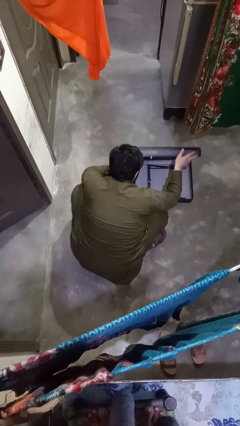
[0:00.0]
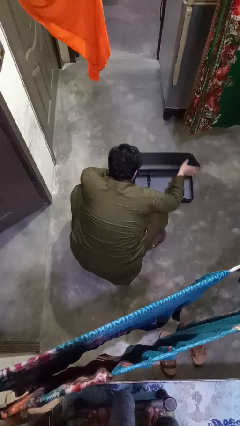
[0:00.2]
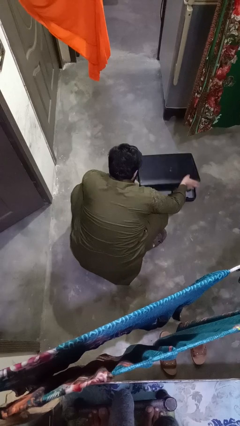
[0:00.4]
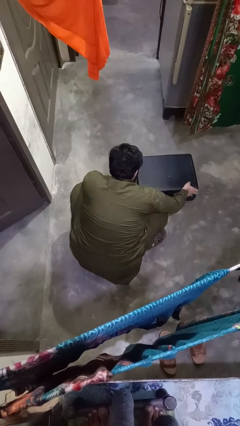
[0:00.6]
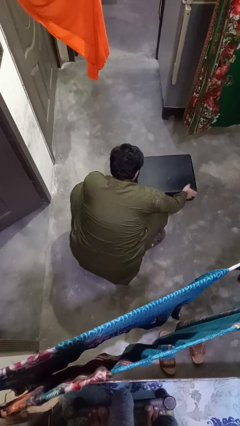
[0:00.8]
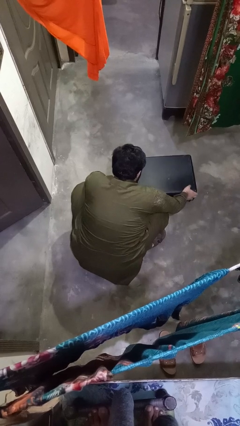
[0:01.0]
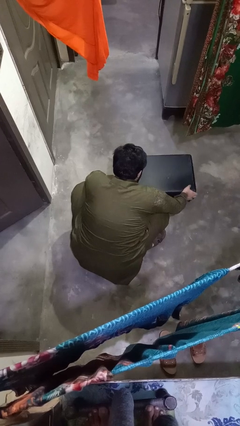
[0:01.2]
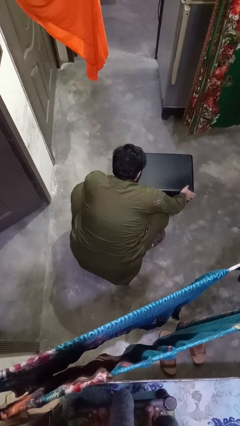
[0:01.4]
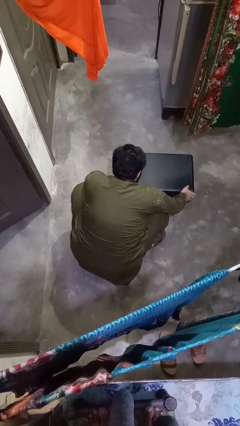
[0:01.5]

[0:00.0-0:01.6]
person closes suitcase

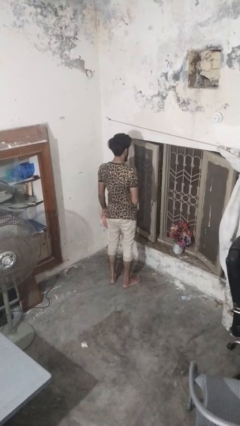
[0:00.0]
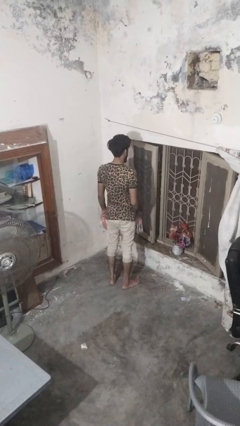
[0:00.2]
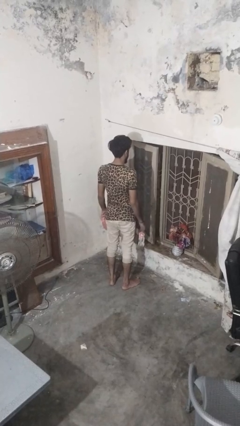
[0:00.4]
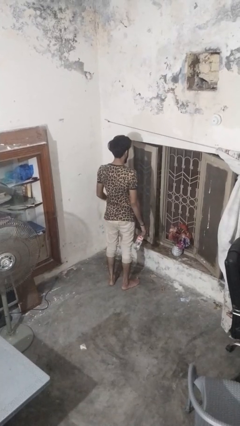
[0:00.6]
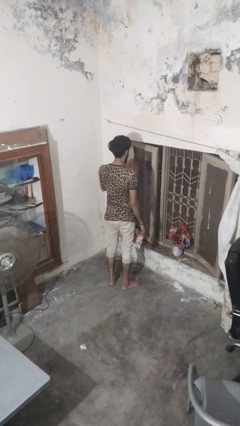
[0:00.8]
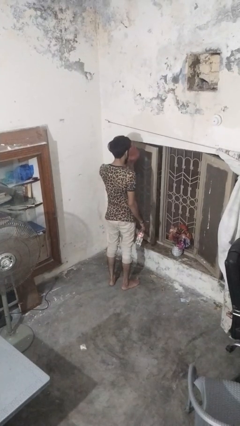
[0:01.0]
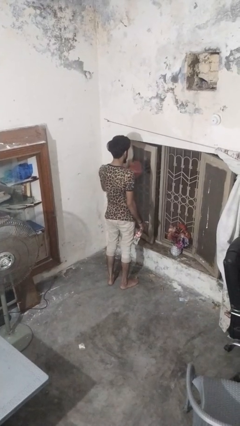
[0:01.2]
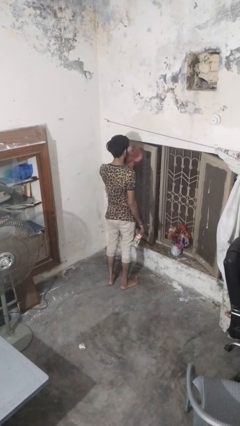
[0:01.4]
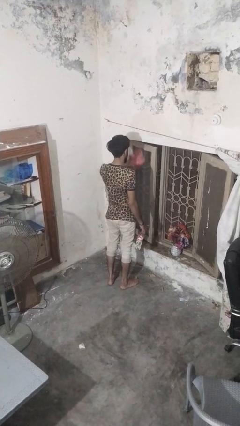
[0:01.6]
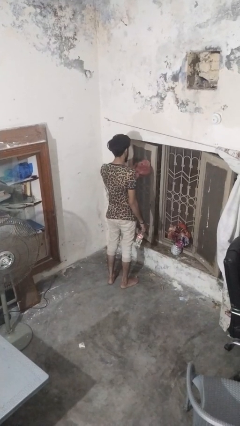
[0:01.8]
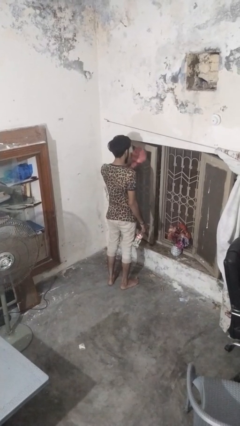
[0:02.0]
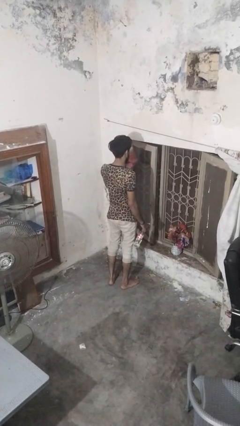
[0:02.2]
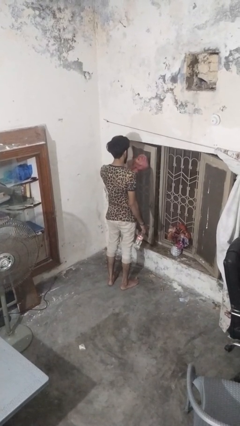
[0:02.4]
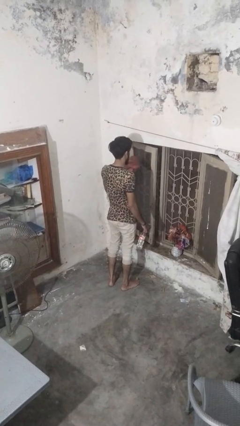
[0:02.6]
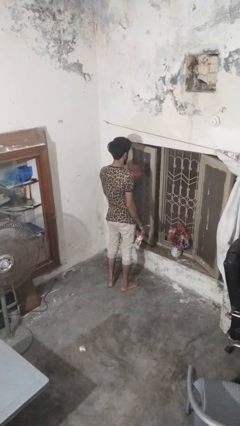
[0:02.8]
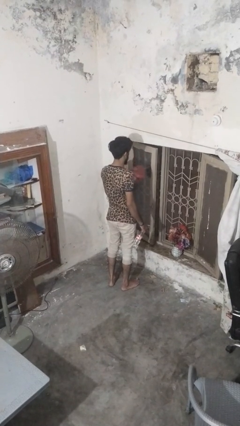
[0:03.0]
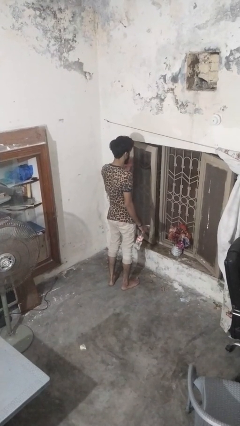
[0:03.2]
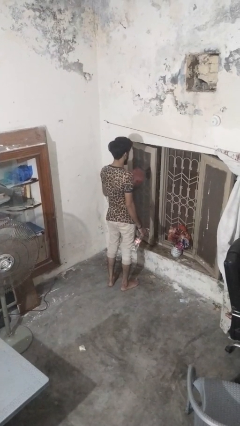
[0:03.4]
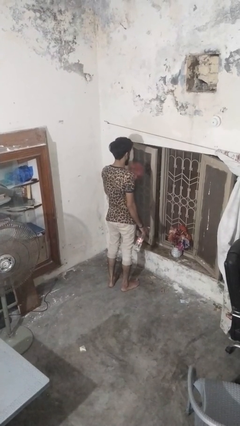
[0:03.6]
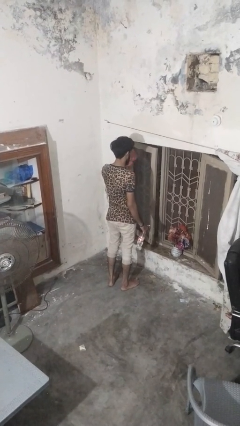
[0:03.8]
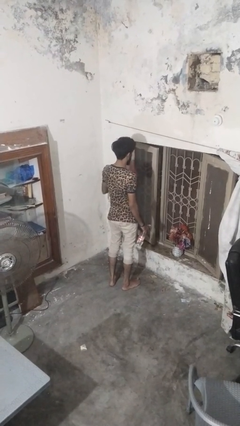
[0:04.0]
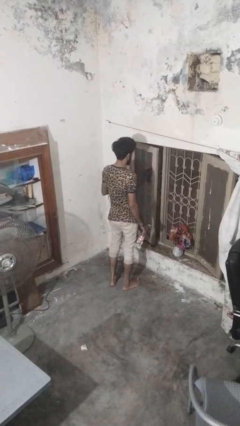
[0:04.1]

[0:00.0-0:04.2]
person washes window

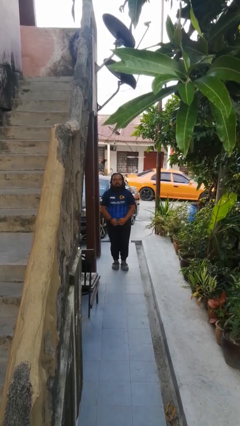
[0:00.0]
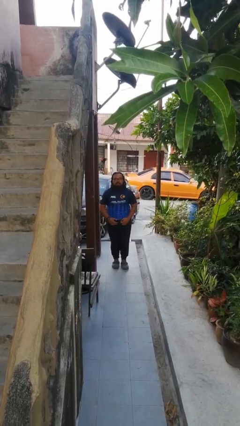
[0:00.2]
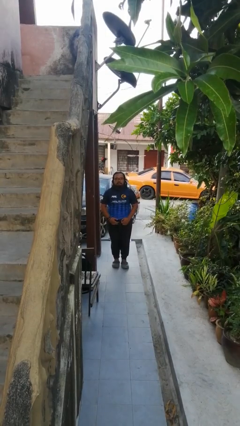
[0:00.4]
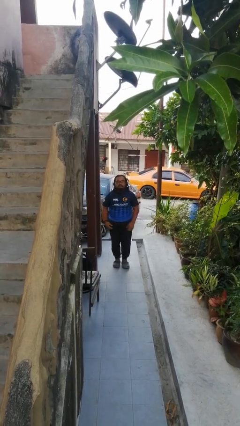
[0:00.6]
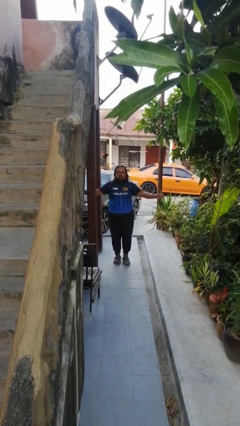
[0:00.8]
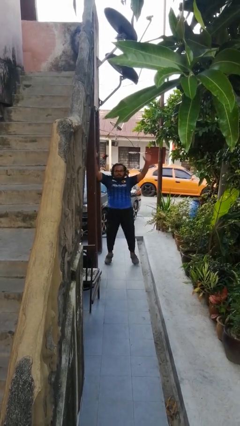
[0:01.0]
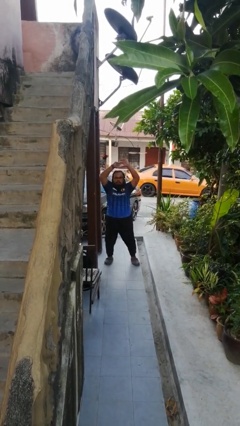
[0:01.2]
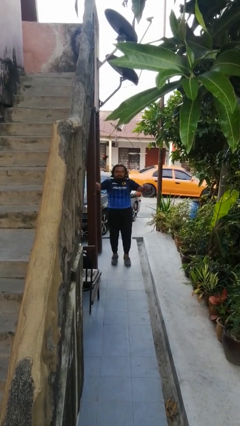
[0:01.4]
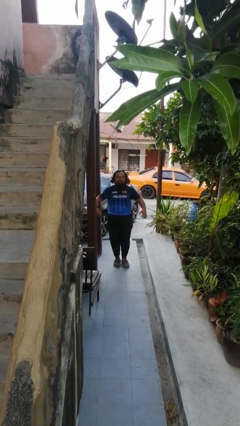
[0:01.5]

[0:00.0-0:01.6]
person exercises with jumping jacks

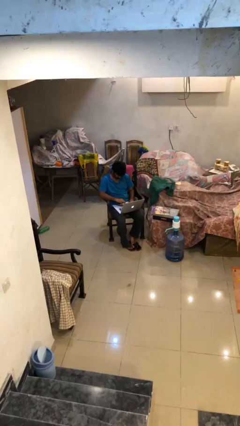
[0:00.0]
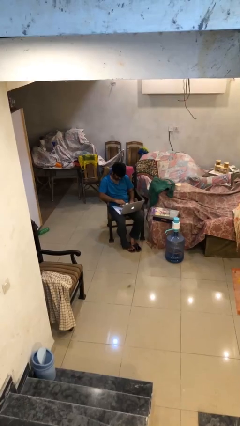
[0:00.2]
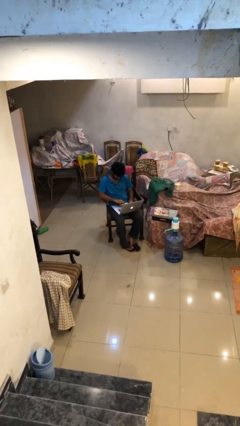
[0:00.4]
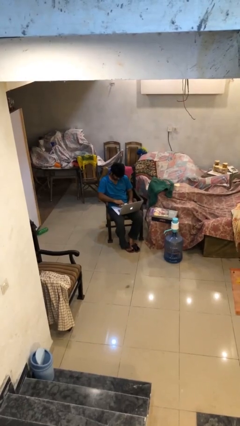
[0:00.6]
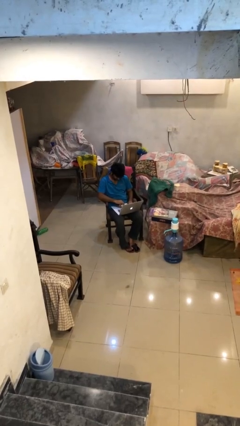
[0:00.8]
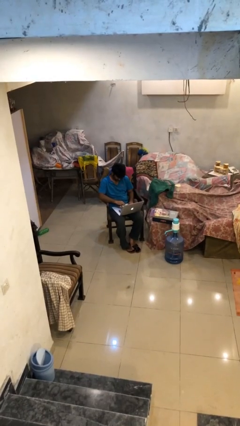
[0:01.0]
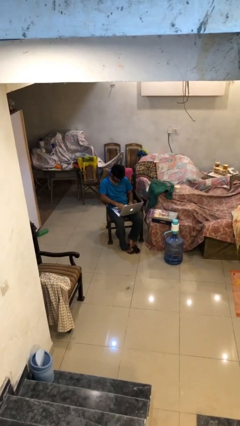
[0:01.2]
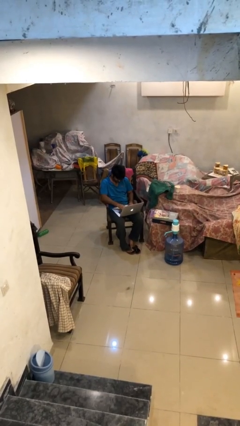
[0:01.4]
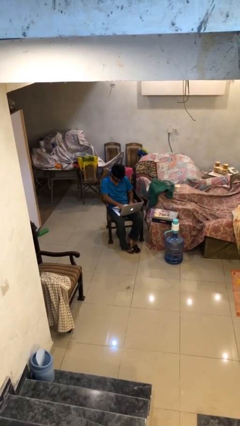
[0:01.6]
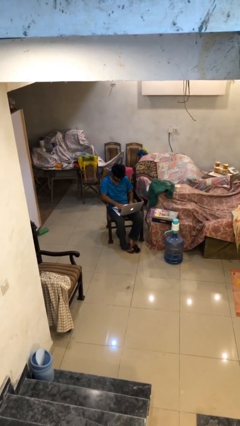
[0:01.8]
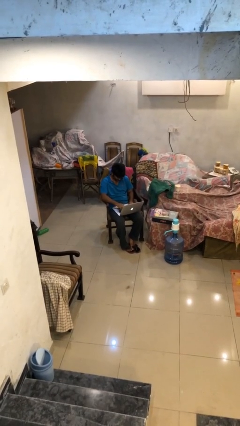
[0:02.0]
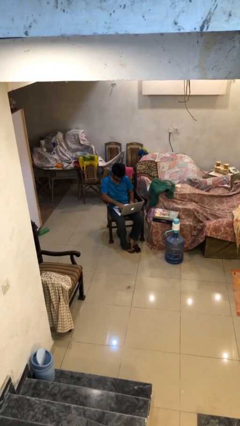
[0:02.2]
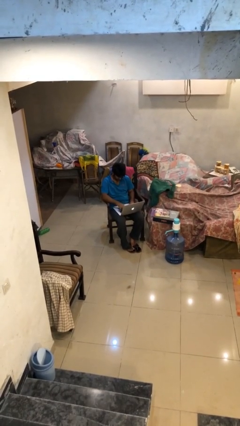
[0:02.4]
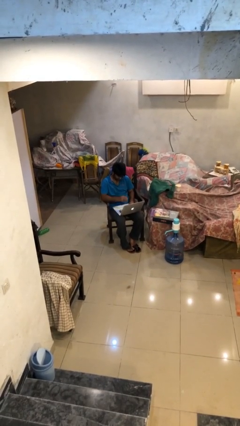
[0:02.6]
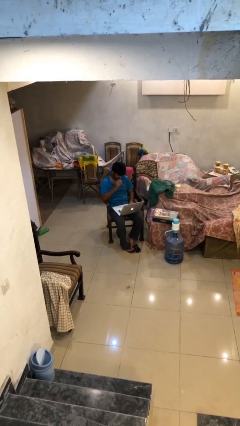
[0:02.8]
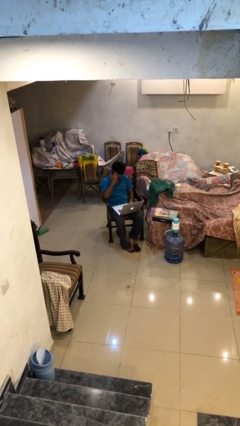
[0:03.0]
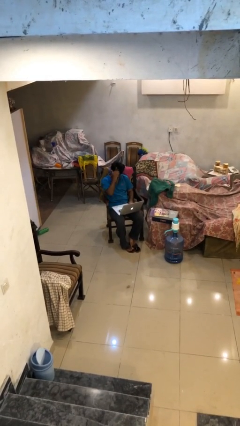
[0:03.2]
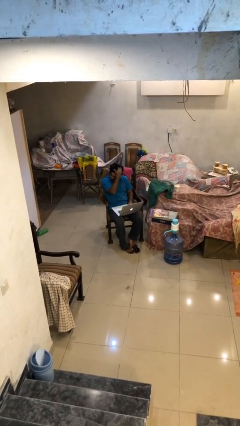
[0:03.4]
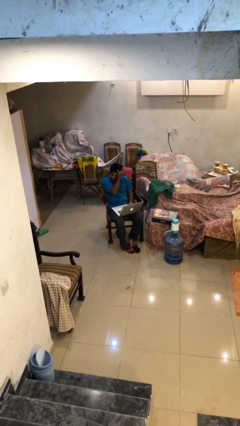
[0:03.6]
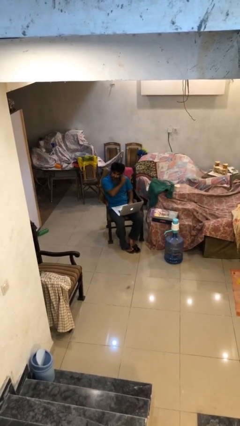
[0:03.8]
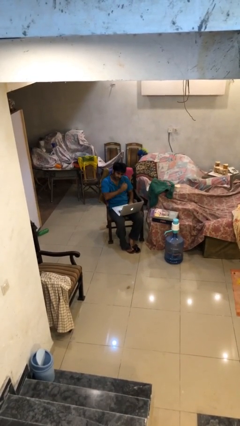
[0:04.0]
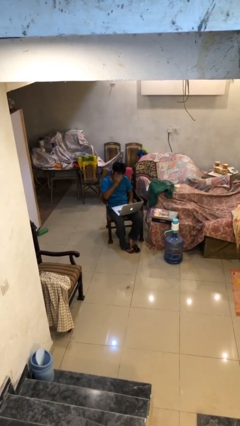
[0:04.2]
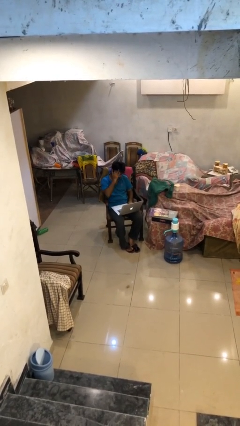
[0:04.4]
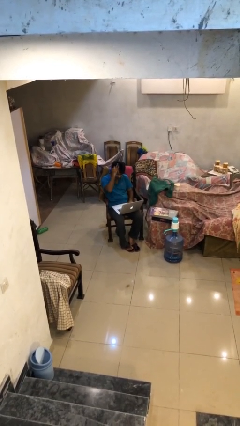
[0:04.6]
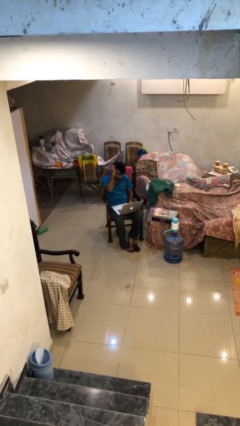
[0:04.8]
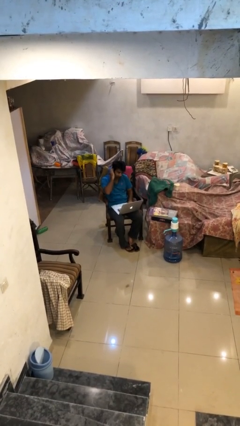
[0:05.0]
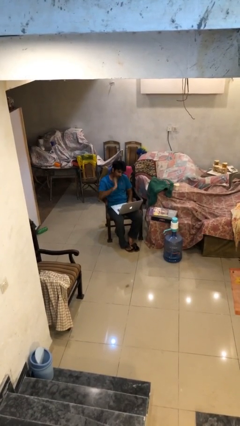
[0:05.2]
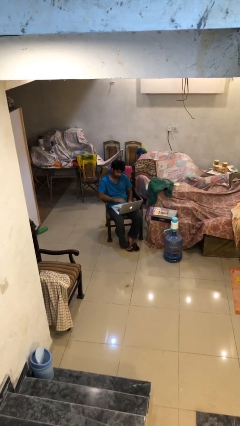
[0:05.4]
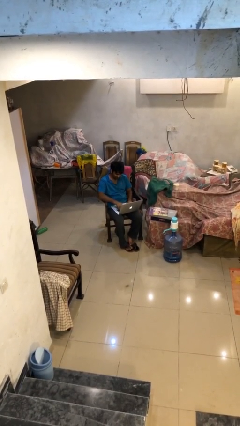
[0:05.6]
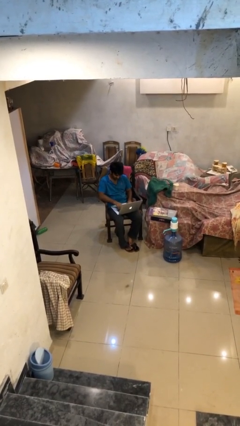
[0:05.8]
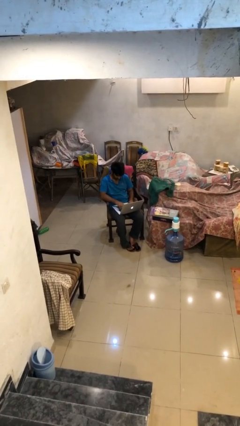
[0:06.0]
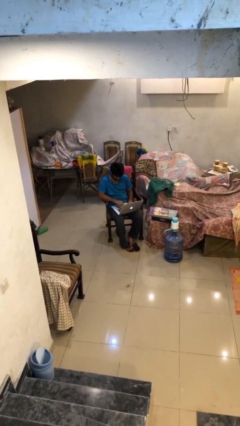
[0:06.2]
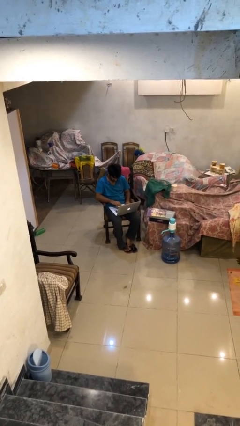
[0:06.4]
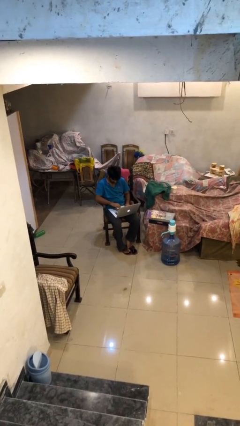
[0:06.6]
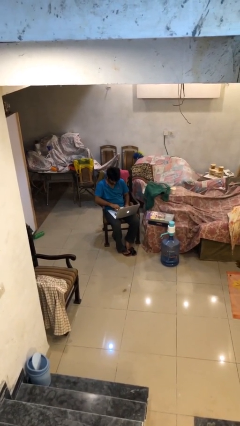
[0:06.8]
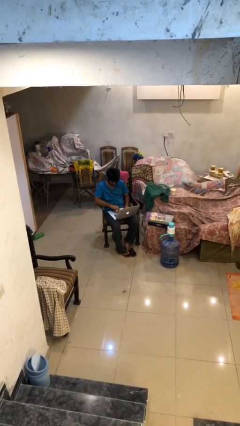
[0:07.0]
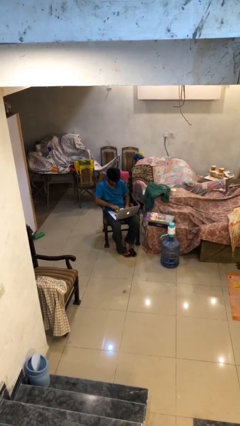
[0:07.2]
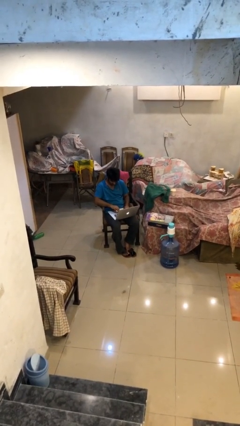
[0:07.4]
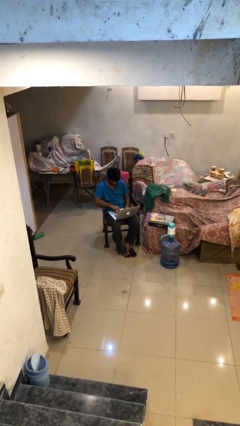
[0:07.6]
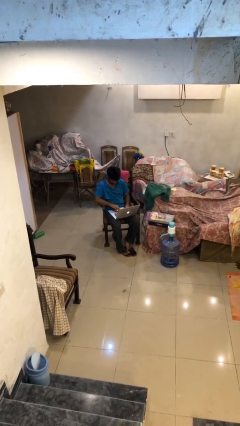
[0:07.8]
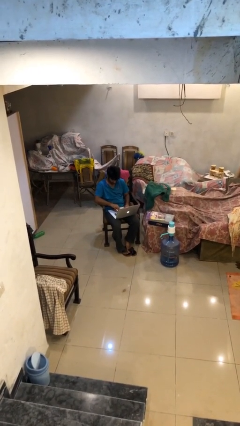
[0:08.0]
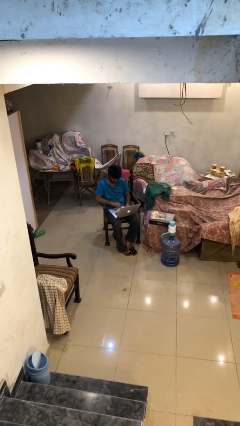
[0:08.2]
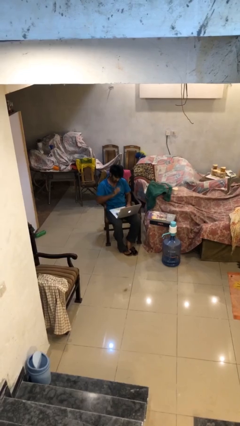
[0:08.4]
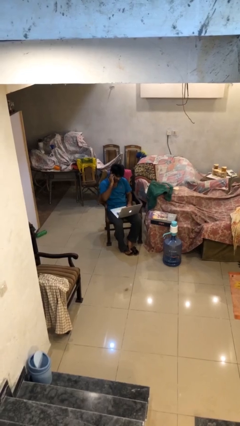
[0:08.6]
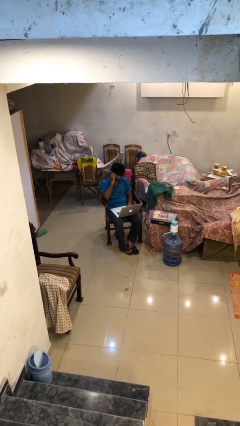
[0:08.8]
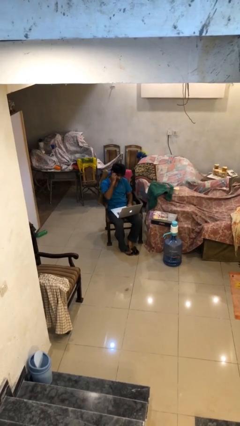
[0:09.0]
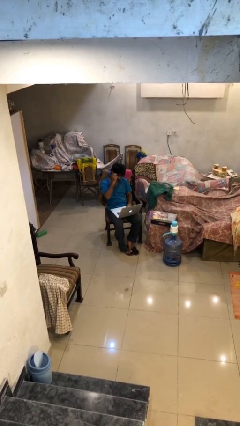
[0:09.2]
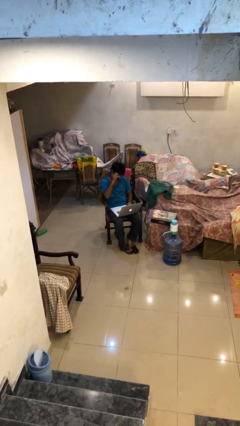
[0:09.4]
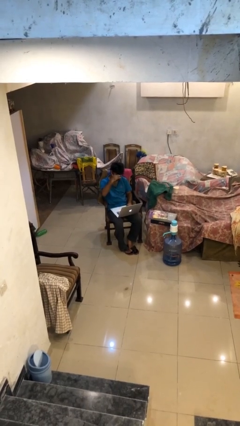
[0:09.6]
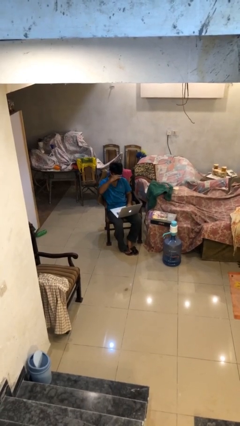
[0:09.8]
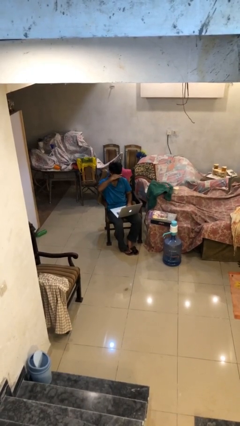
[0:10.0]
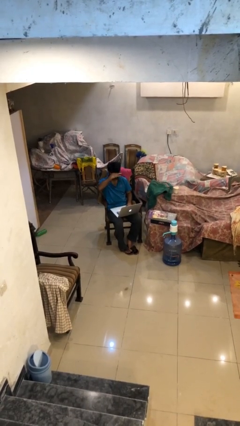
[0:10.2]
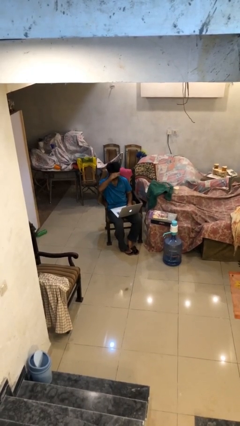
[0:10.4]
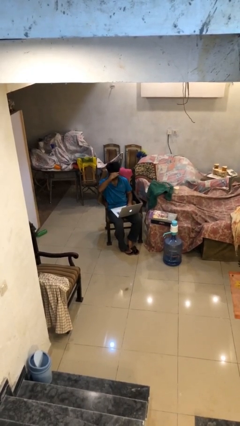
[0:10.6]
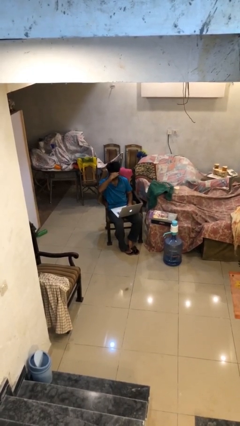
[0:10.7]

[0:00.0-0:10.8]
person interacts with laptop
